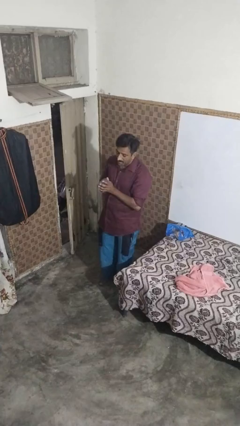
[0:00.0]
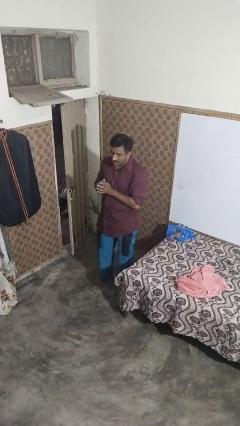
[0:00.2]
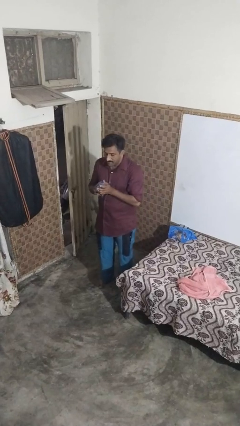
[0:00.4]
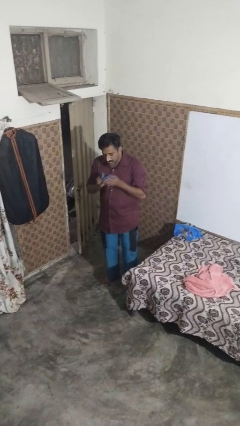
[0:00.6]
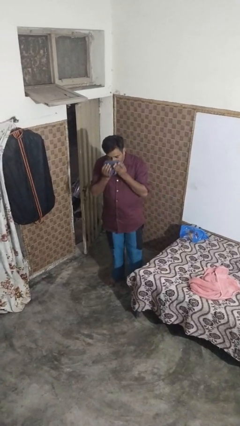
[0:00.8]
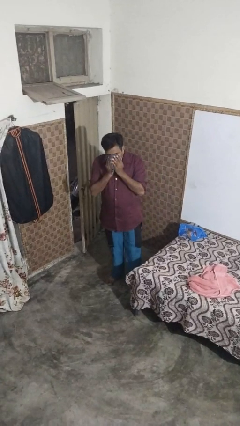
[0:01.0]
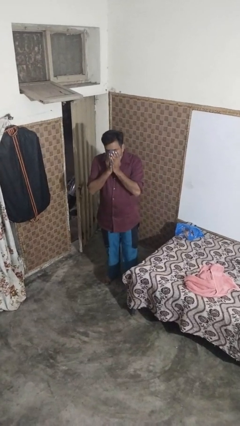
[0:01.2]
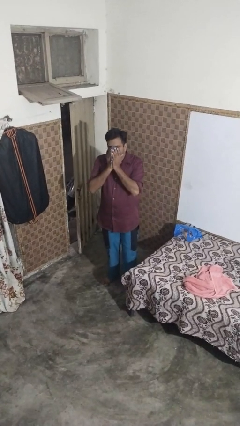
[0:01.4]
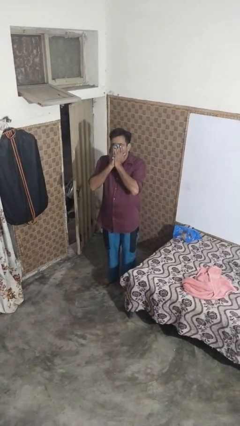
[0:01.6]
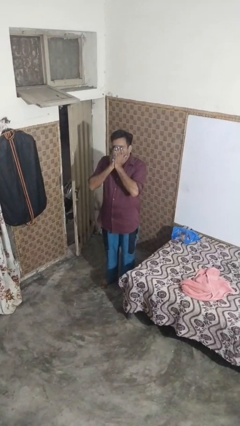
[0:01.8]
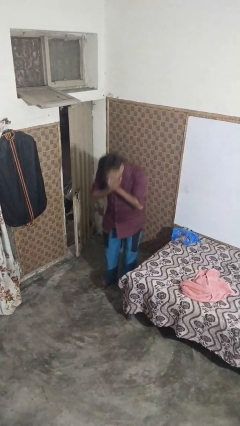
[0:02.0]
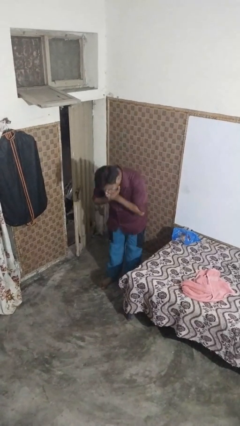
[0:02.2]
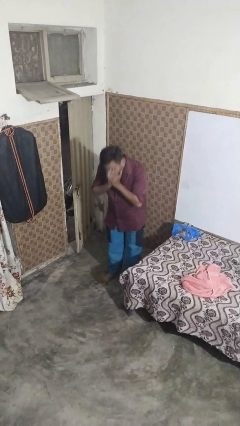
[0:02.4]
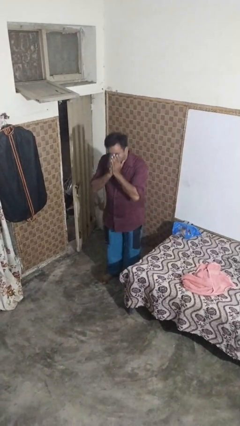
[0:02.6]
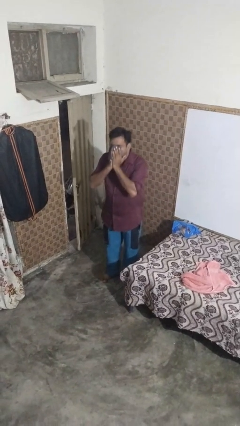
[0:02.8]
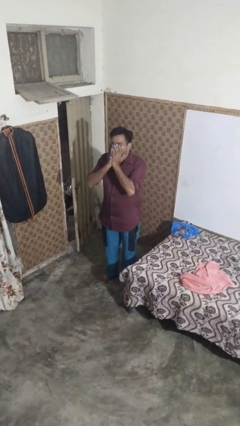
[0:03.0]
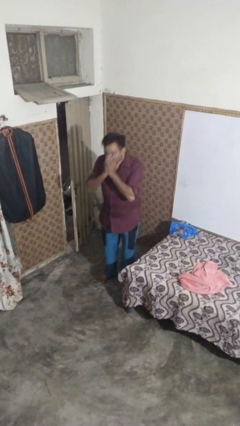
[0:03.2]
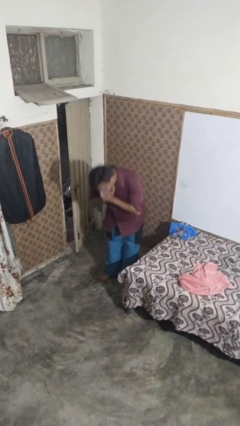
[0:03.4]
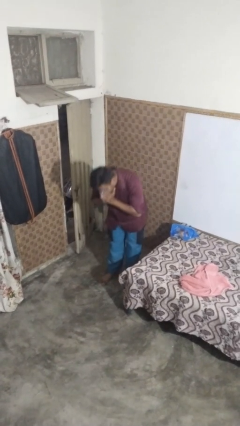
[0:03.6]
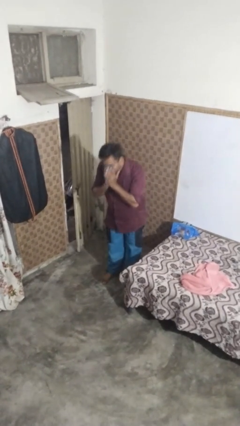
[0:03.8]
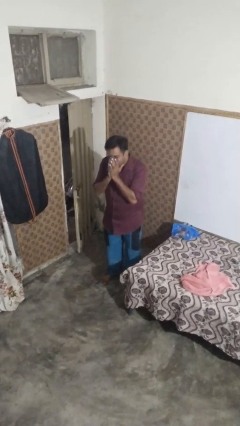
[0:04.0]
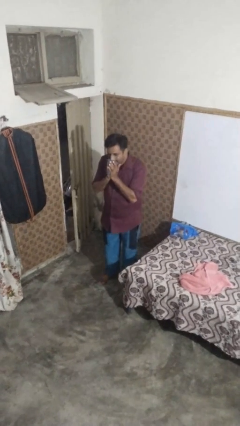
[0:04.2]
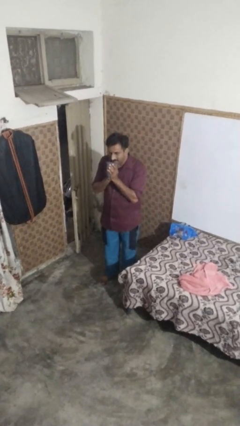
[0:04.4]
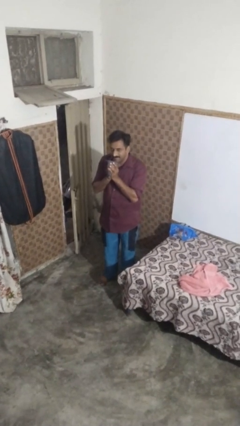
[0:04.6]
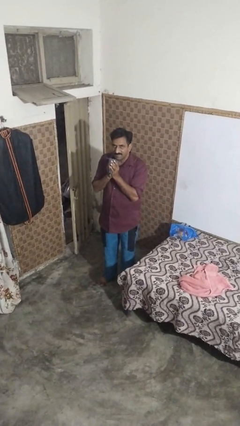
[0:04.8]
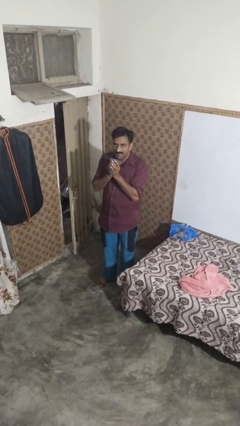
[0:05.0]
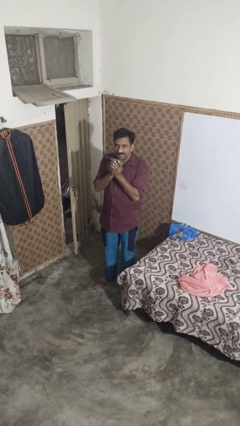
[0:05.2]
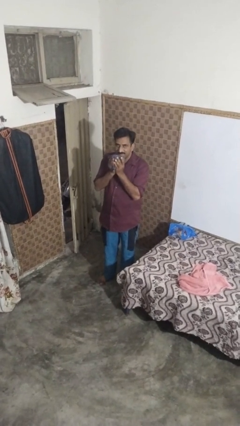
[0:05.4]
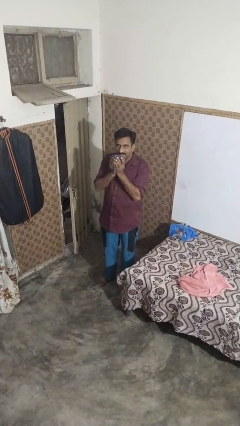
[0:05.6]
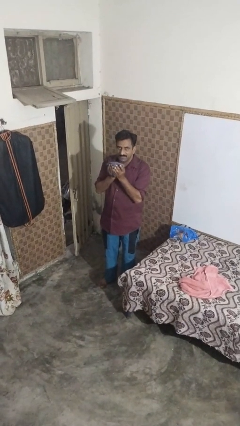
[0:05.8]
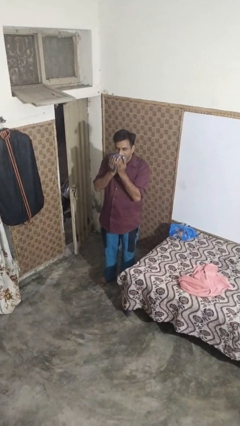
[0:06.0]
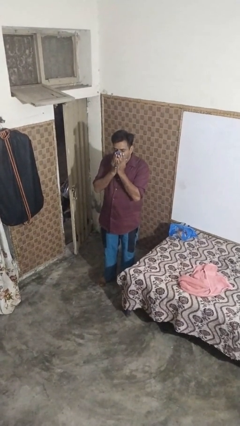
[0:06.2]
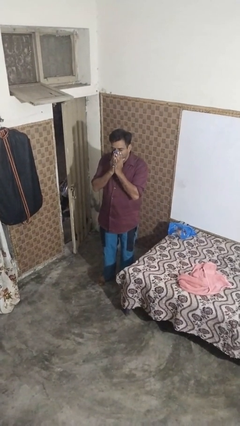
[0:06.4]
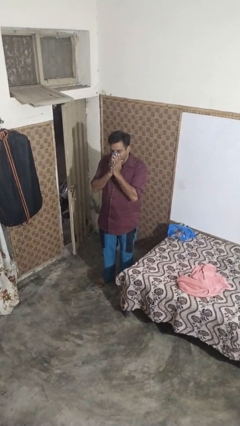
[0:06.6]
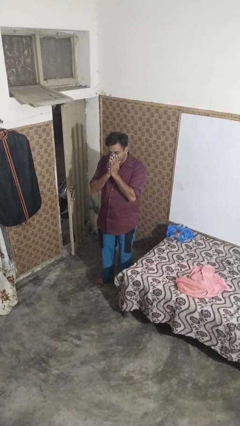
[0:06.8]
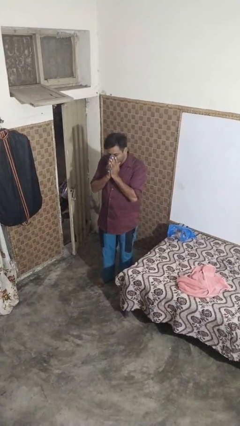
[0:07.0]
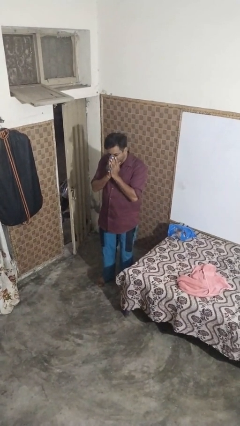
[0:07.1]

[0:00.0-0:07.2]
person blows nose

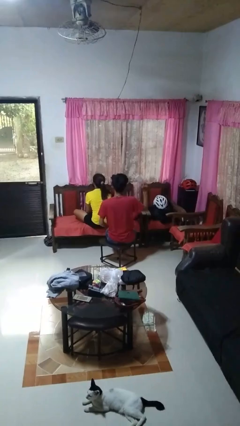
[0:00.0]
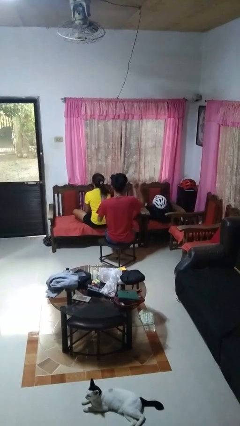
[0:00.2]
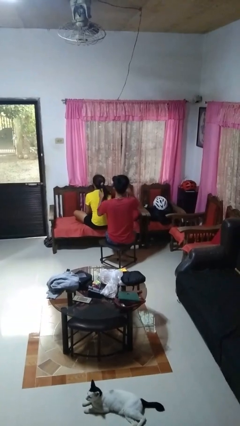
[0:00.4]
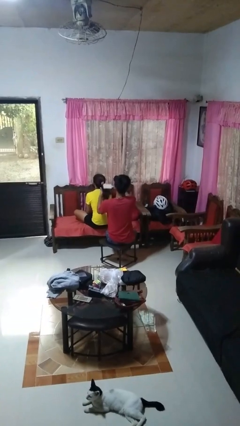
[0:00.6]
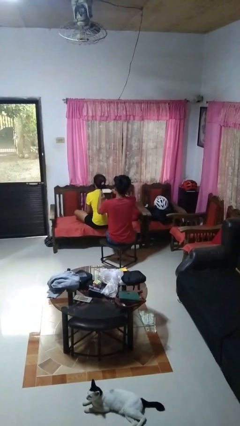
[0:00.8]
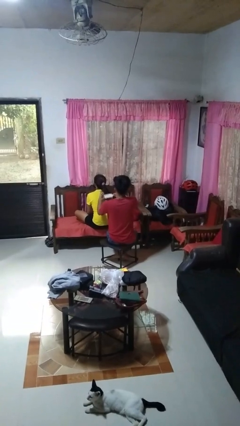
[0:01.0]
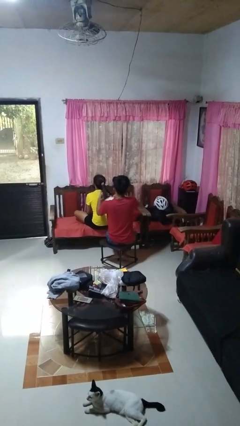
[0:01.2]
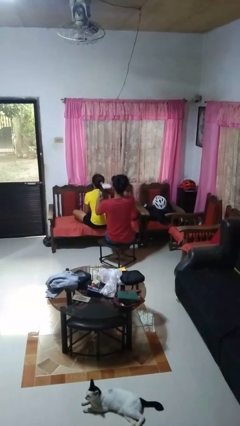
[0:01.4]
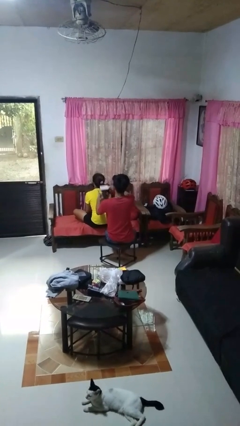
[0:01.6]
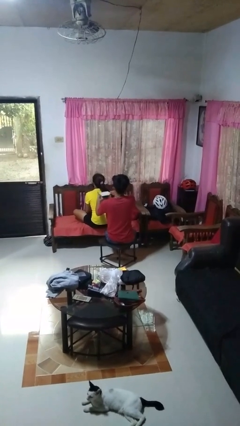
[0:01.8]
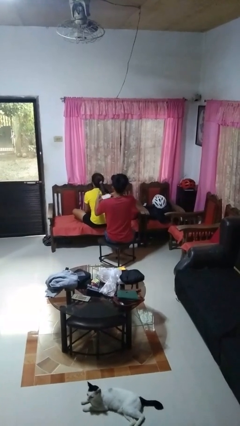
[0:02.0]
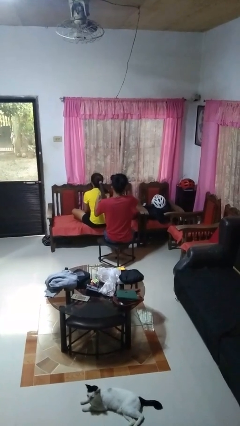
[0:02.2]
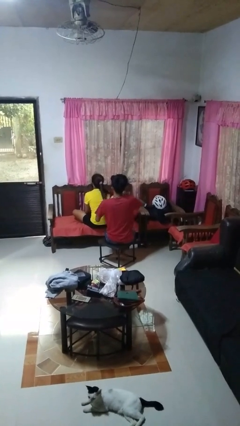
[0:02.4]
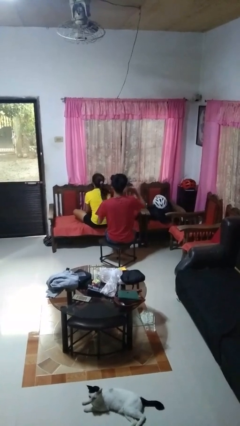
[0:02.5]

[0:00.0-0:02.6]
person brushes hair of person

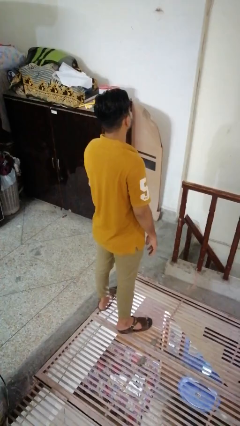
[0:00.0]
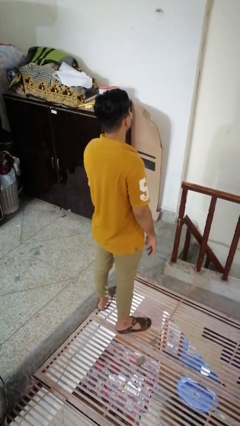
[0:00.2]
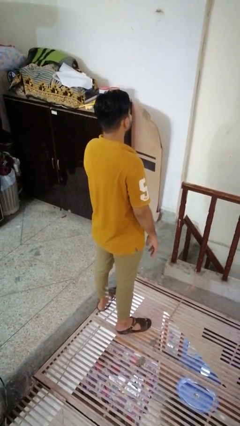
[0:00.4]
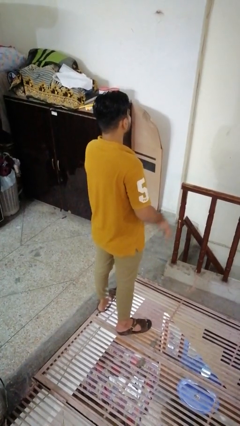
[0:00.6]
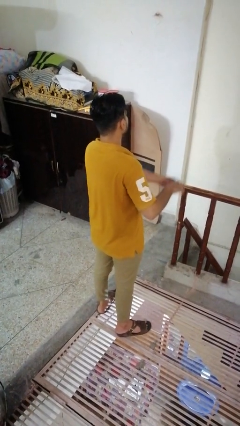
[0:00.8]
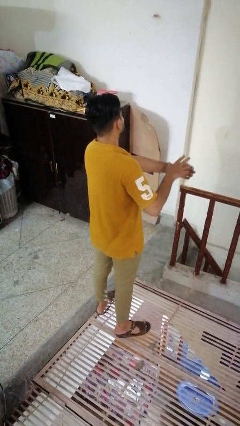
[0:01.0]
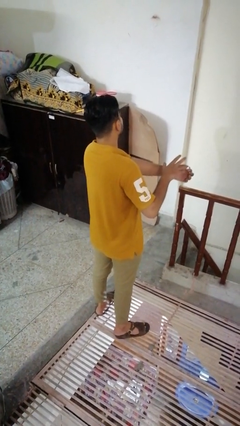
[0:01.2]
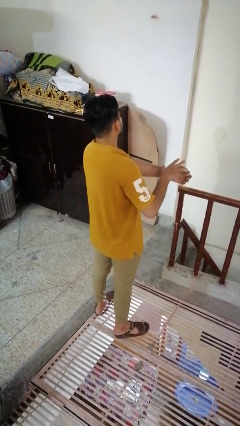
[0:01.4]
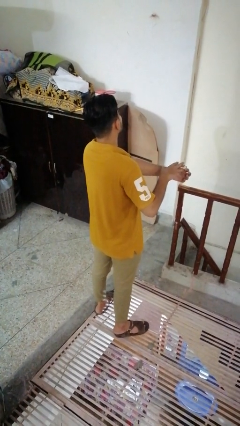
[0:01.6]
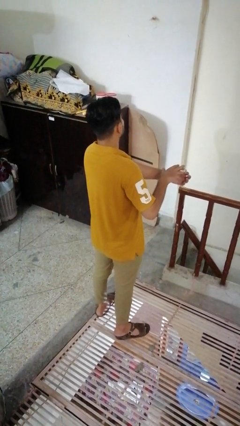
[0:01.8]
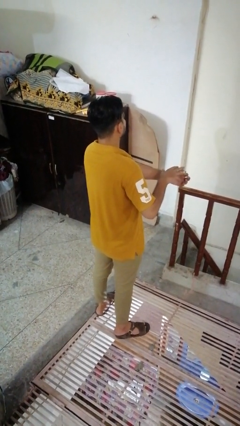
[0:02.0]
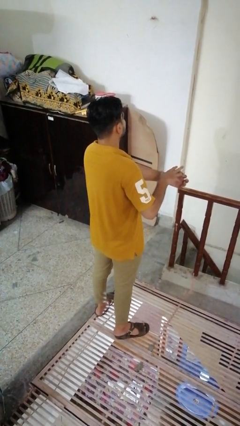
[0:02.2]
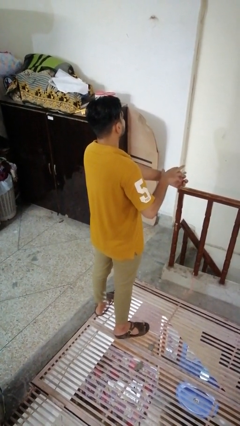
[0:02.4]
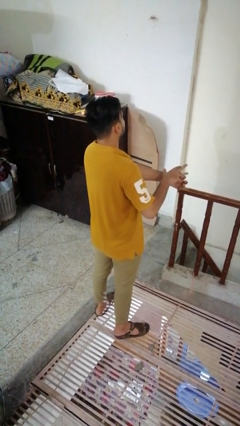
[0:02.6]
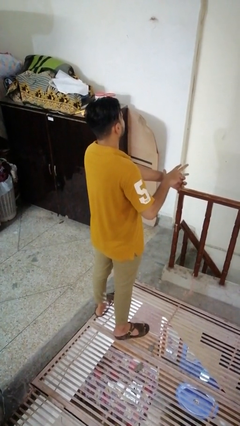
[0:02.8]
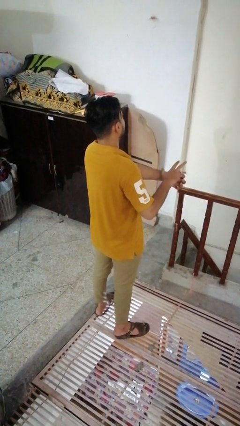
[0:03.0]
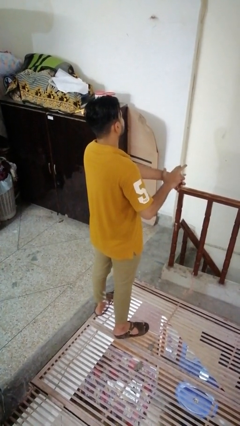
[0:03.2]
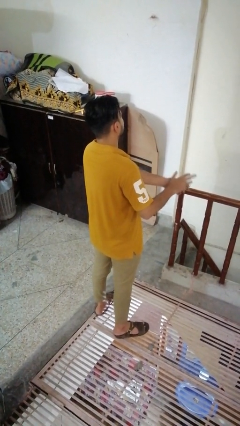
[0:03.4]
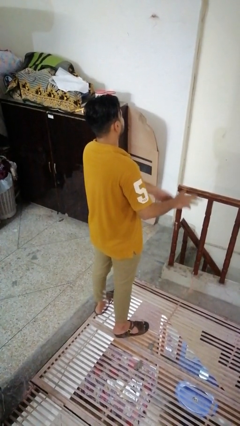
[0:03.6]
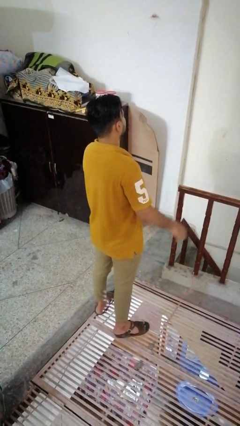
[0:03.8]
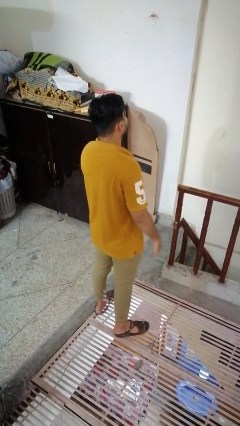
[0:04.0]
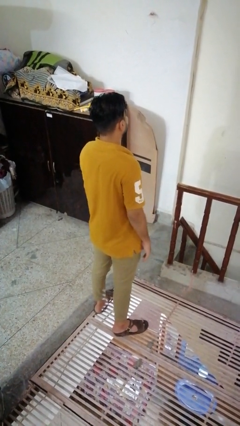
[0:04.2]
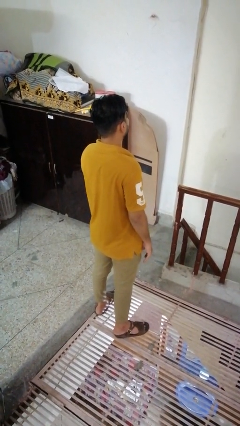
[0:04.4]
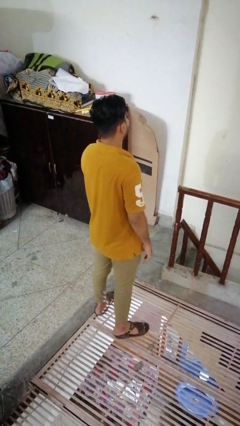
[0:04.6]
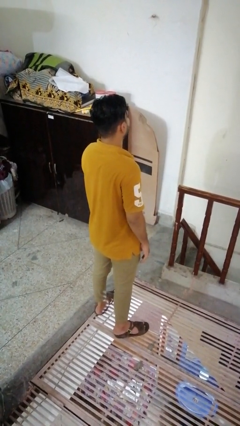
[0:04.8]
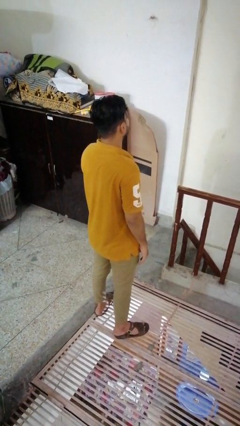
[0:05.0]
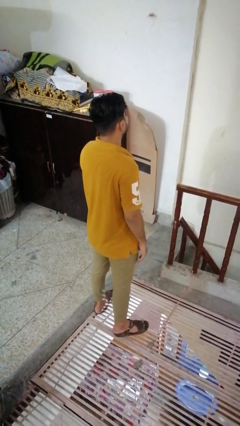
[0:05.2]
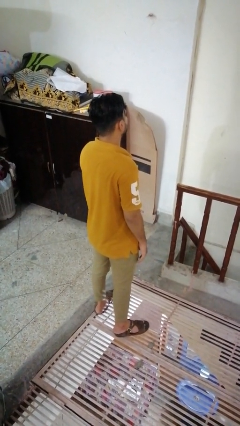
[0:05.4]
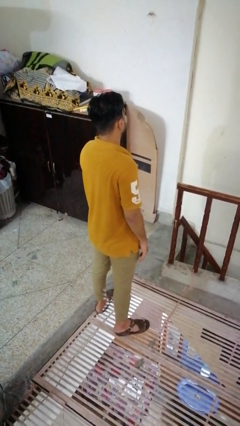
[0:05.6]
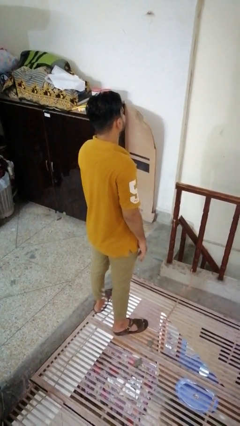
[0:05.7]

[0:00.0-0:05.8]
person puts on ring

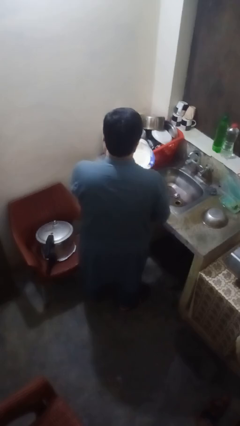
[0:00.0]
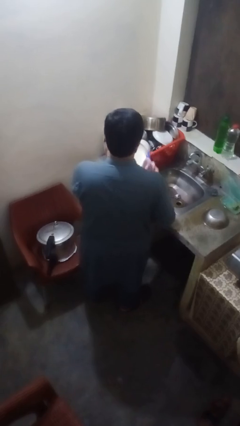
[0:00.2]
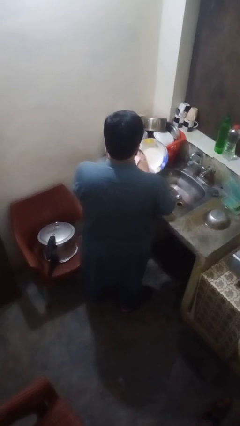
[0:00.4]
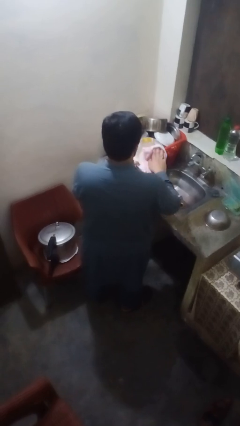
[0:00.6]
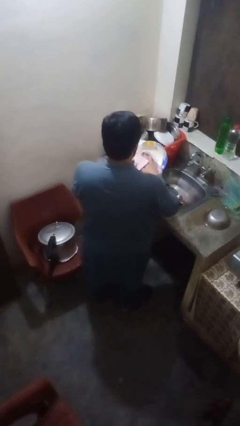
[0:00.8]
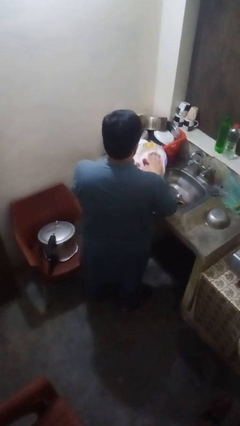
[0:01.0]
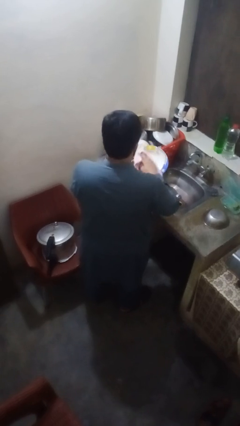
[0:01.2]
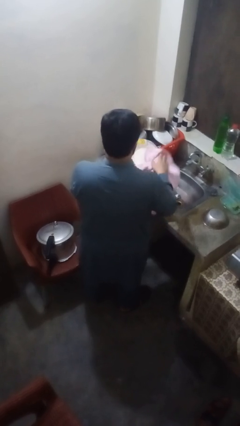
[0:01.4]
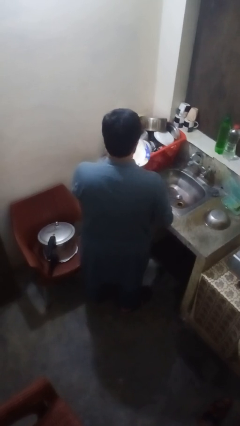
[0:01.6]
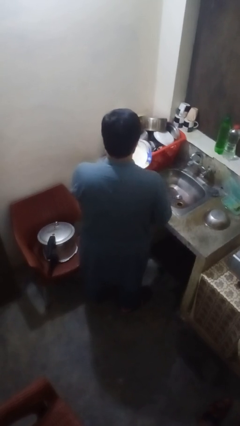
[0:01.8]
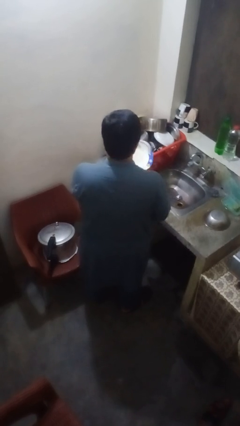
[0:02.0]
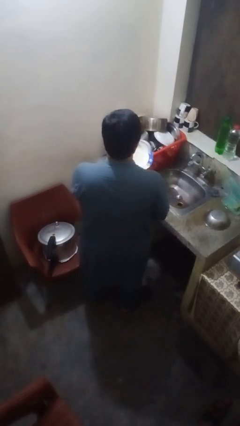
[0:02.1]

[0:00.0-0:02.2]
person dries dish
